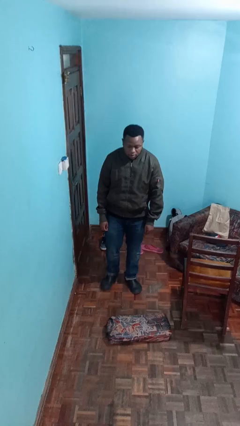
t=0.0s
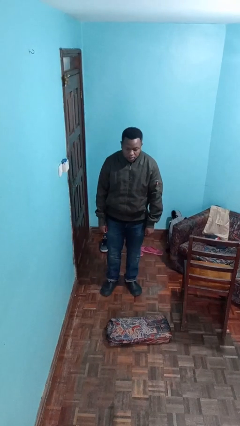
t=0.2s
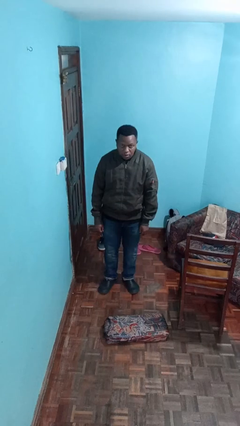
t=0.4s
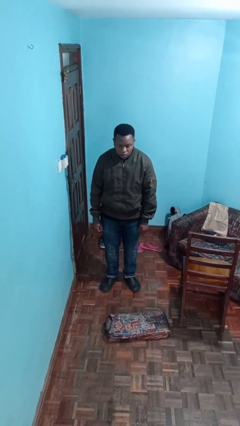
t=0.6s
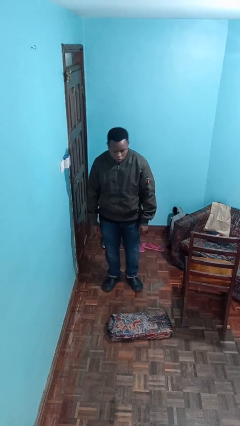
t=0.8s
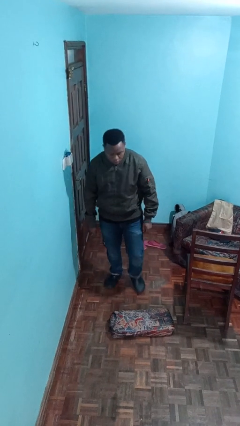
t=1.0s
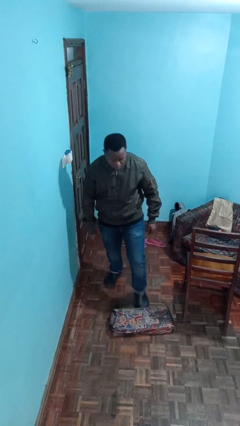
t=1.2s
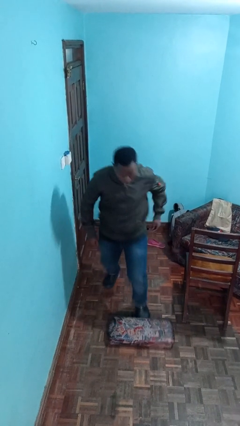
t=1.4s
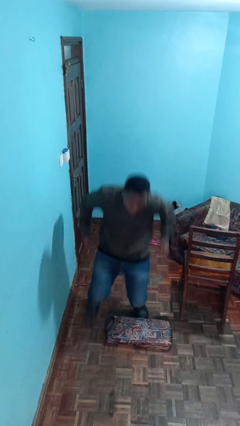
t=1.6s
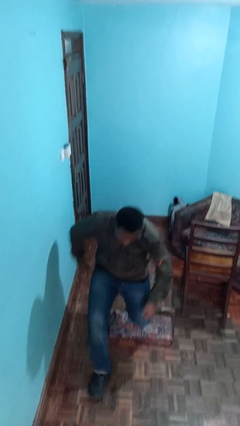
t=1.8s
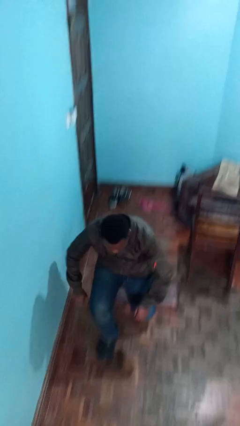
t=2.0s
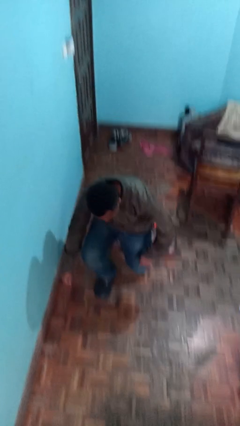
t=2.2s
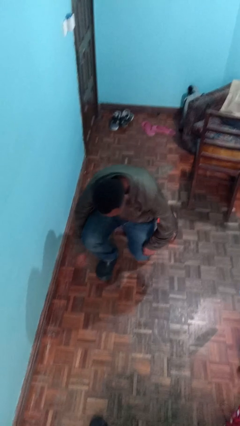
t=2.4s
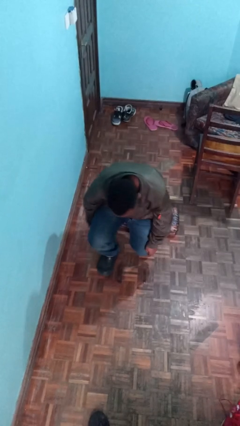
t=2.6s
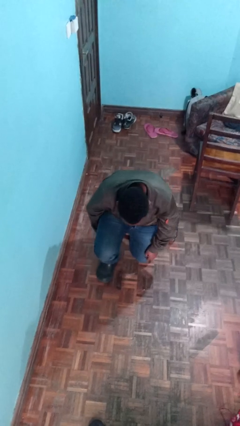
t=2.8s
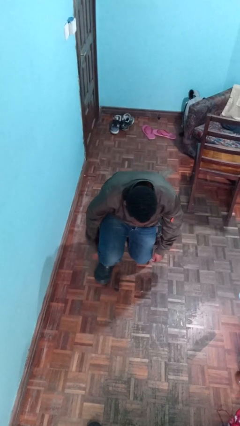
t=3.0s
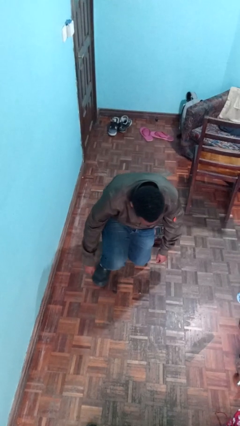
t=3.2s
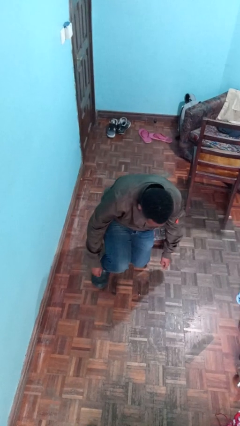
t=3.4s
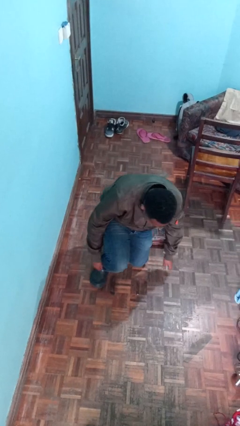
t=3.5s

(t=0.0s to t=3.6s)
person trips on object on floor

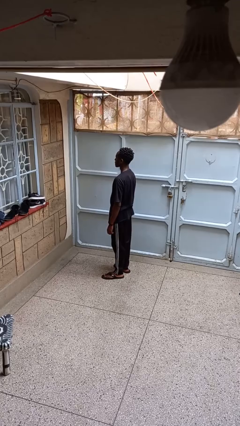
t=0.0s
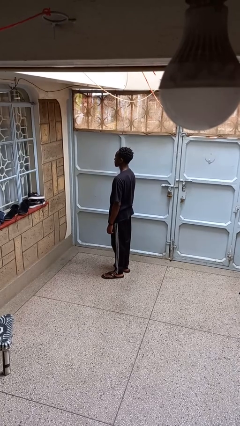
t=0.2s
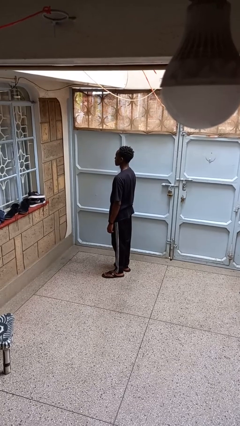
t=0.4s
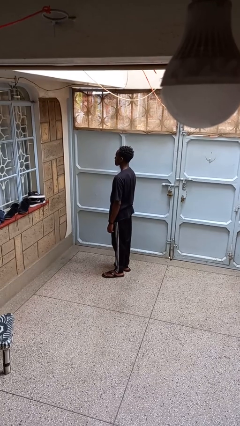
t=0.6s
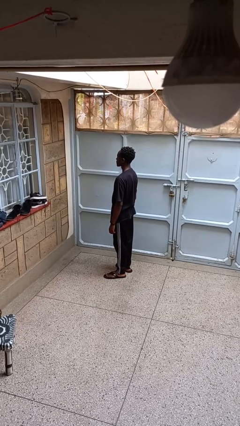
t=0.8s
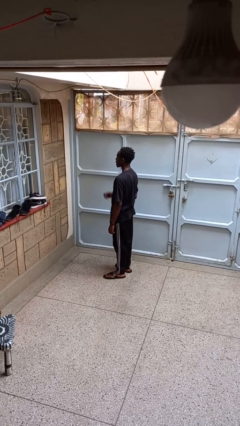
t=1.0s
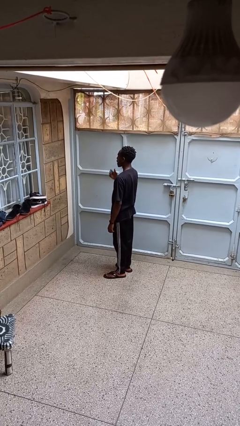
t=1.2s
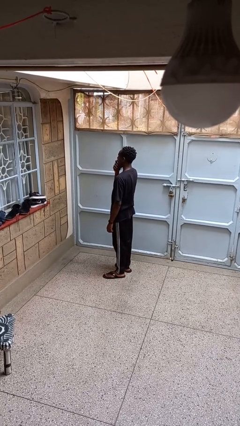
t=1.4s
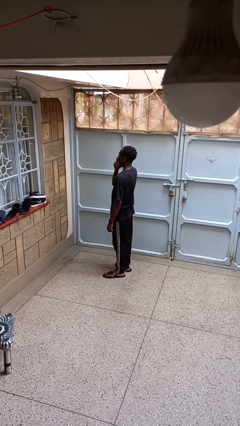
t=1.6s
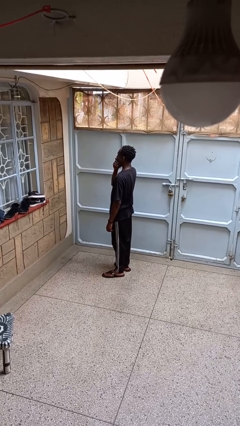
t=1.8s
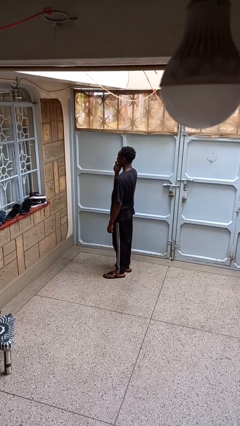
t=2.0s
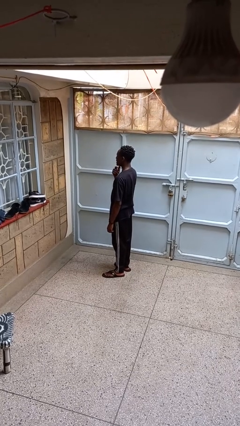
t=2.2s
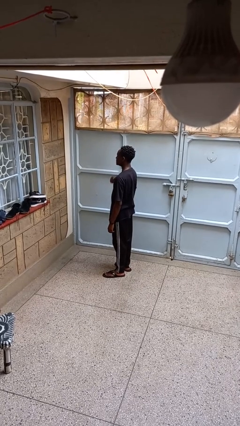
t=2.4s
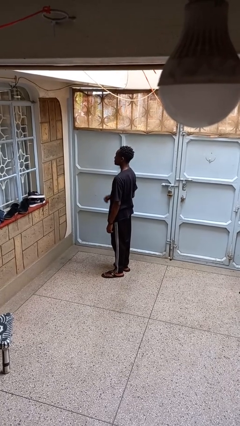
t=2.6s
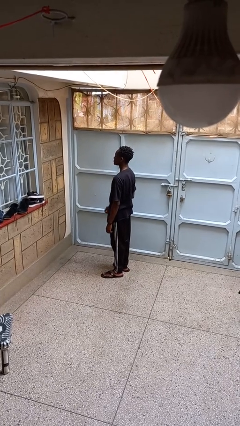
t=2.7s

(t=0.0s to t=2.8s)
person yawns

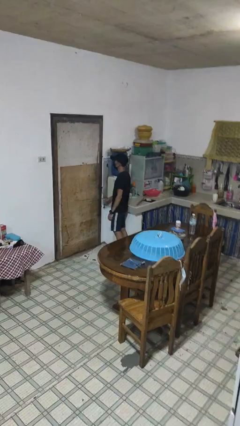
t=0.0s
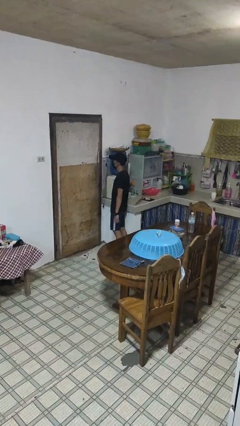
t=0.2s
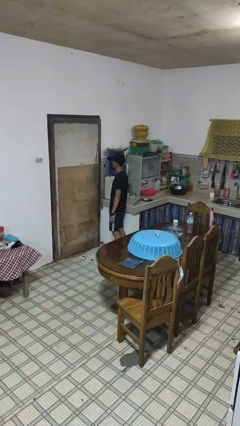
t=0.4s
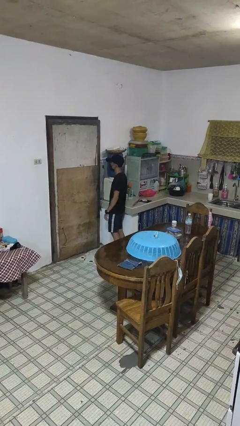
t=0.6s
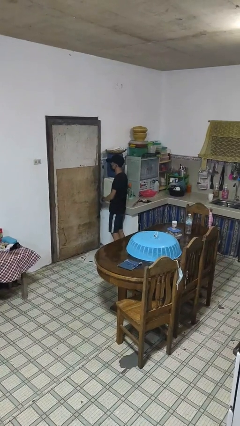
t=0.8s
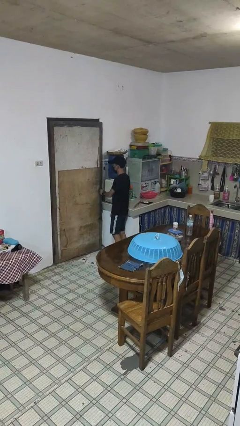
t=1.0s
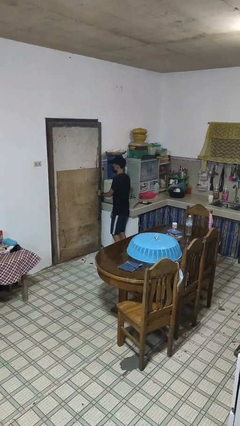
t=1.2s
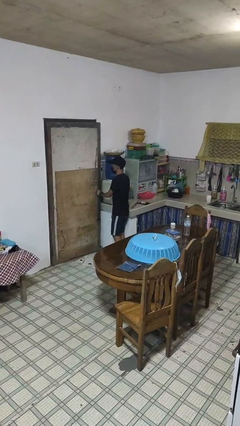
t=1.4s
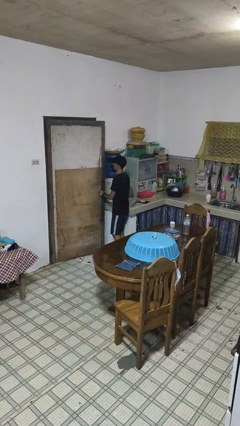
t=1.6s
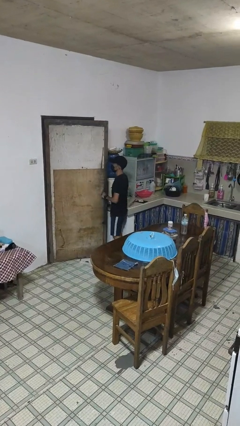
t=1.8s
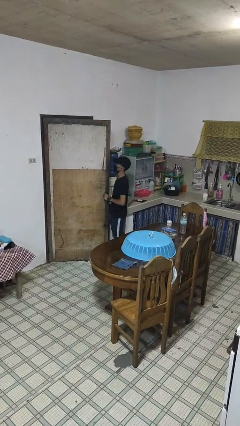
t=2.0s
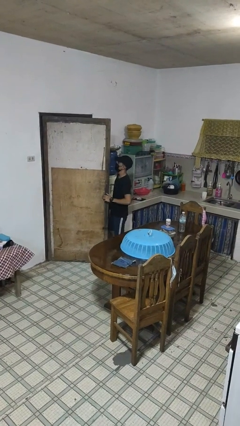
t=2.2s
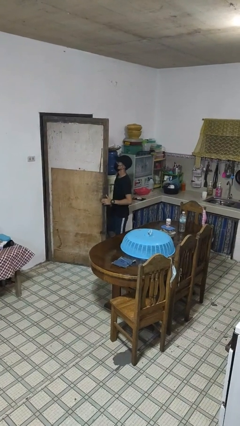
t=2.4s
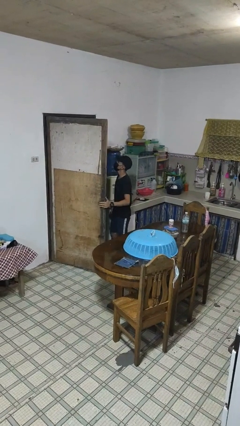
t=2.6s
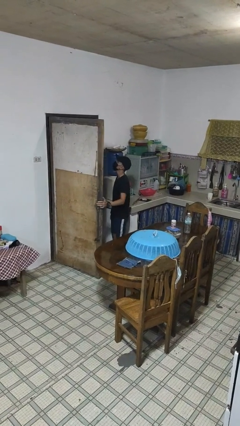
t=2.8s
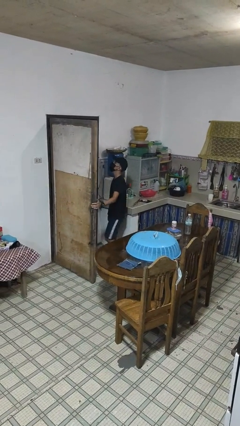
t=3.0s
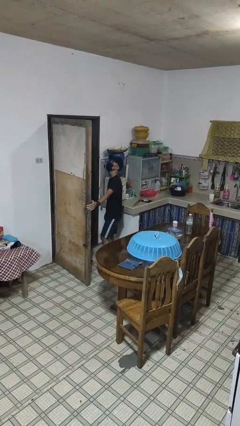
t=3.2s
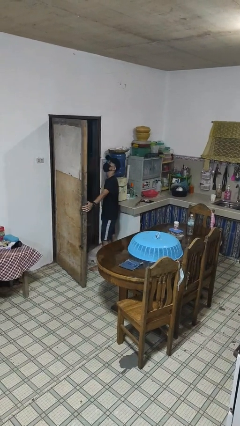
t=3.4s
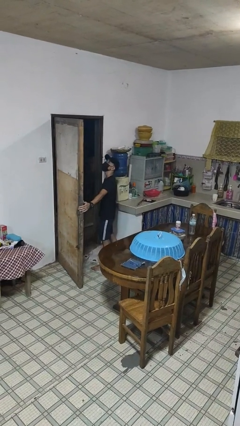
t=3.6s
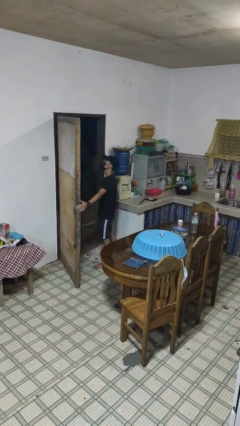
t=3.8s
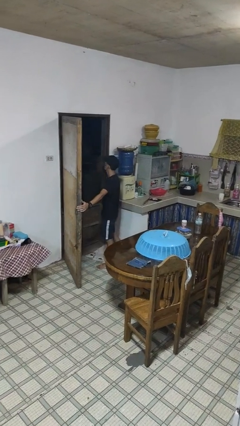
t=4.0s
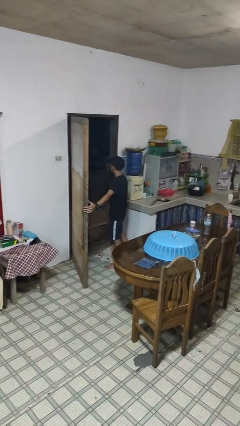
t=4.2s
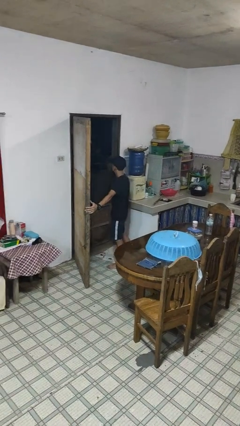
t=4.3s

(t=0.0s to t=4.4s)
person opens facility door

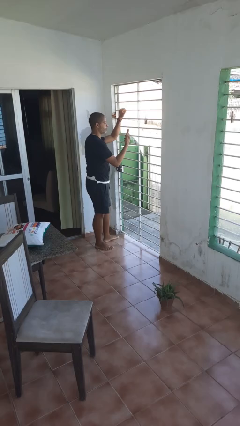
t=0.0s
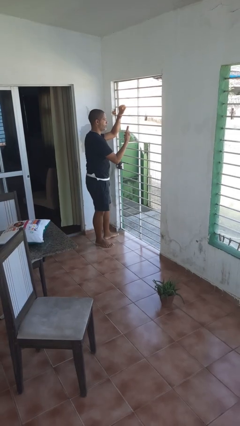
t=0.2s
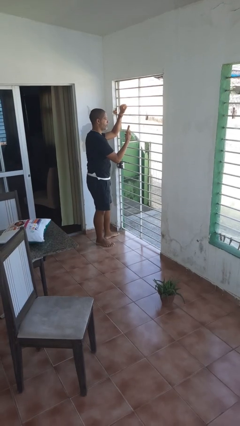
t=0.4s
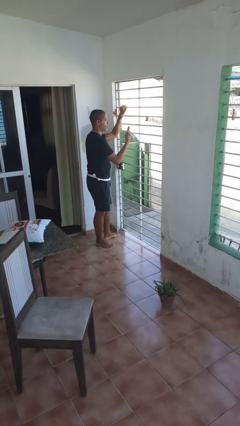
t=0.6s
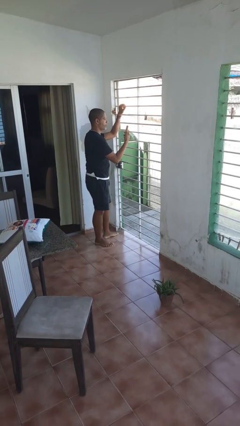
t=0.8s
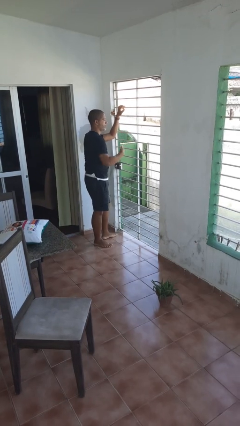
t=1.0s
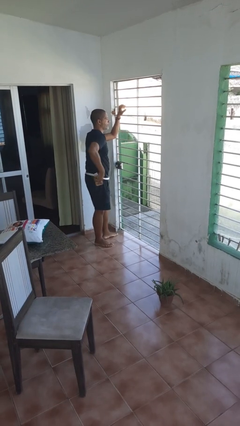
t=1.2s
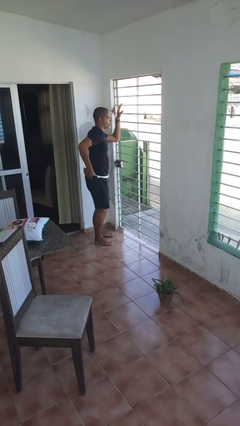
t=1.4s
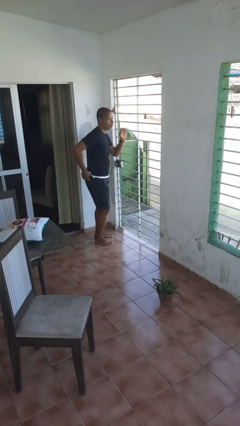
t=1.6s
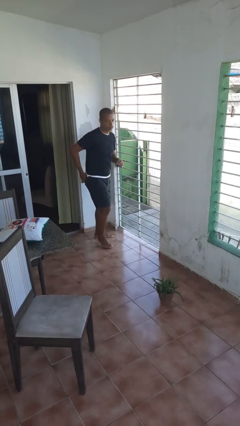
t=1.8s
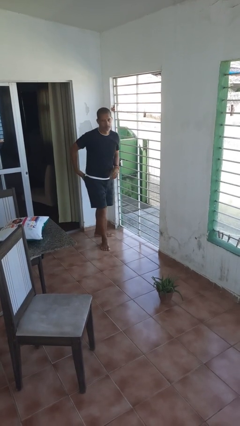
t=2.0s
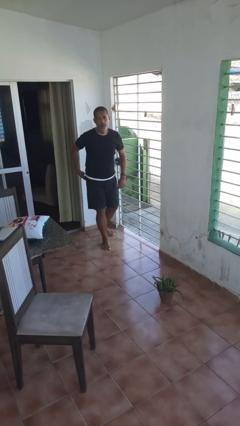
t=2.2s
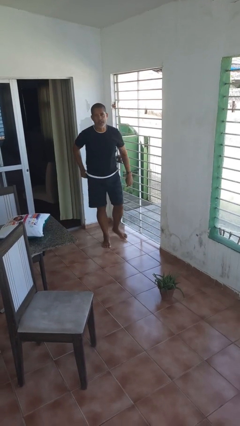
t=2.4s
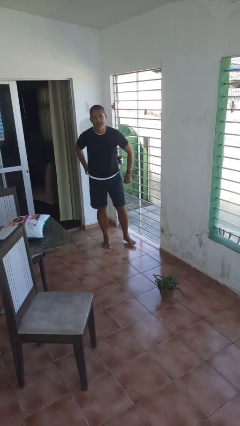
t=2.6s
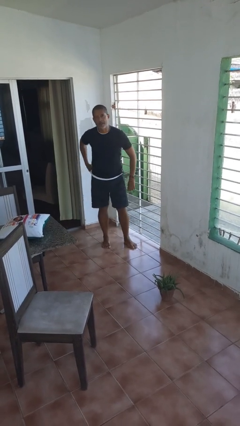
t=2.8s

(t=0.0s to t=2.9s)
person puts phone into pocket

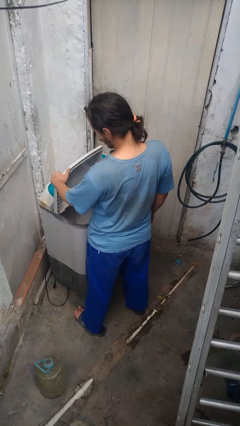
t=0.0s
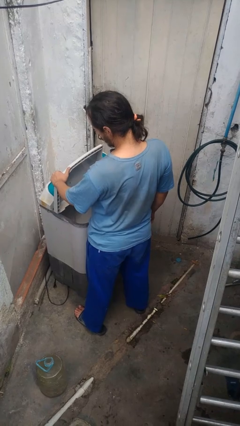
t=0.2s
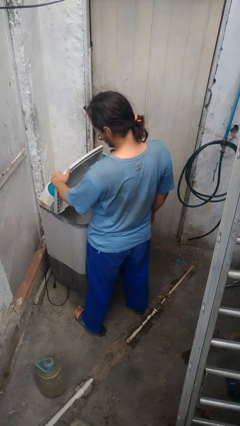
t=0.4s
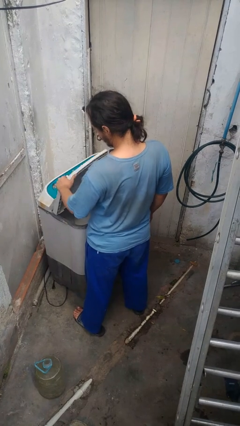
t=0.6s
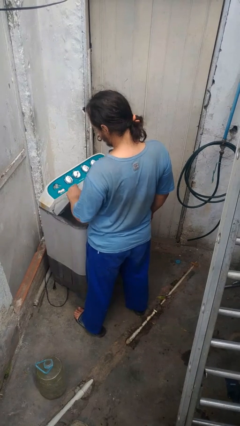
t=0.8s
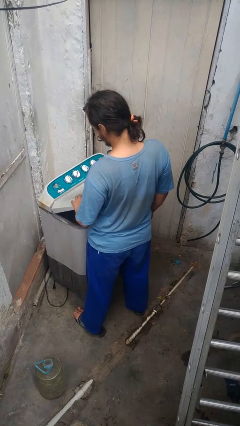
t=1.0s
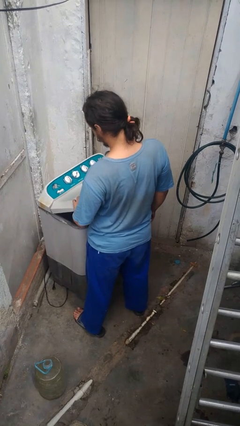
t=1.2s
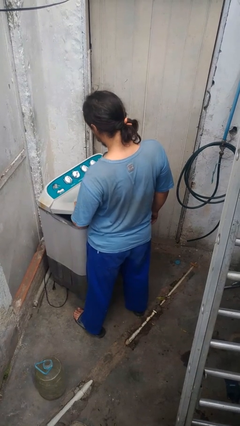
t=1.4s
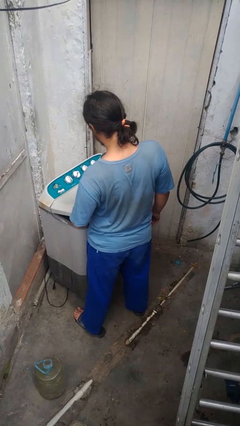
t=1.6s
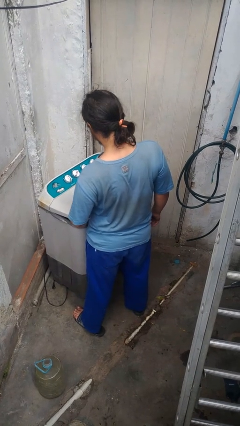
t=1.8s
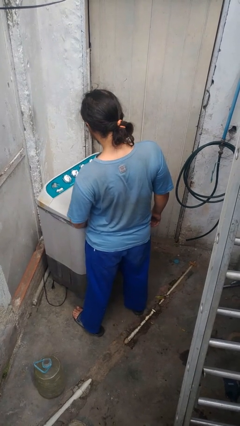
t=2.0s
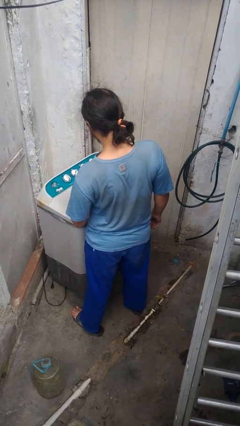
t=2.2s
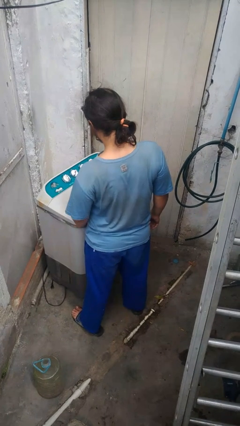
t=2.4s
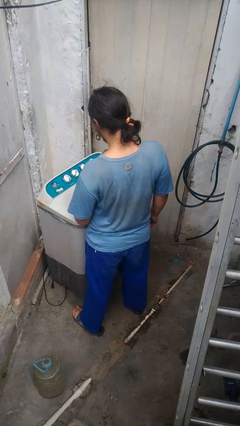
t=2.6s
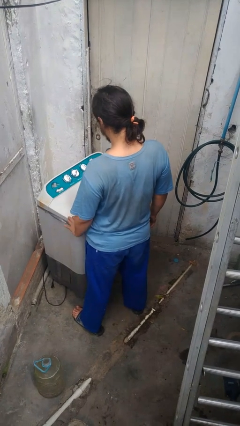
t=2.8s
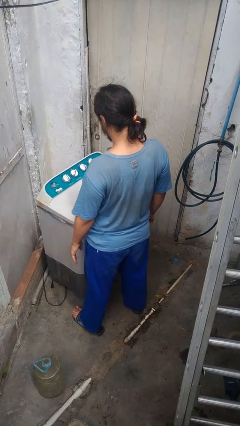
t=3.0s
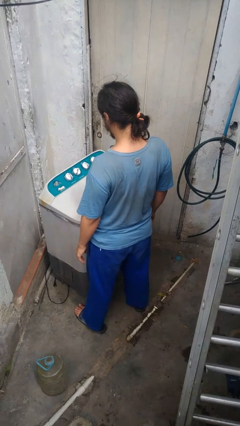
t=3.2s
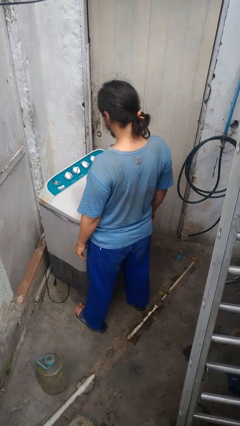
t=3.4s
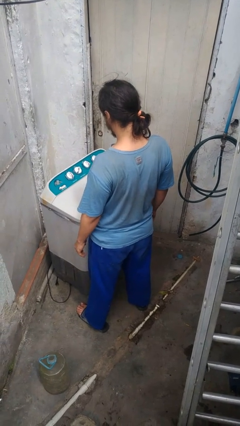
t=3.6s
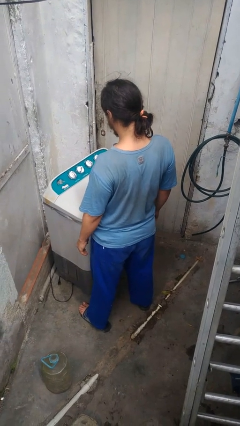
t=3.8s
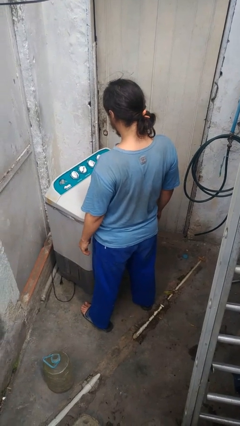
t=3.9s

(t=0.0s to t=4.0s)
person closes clothes washer
